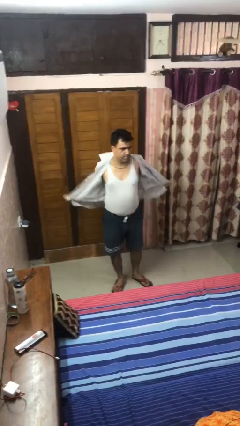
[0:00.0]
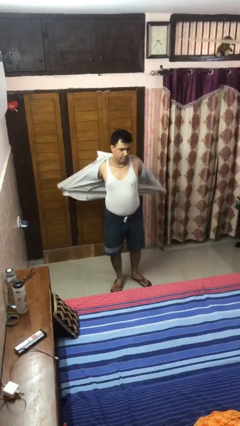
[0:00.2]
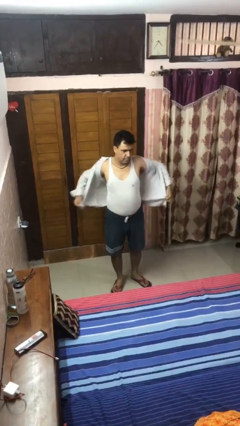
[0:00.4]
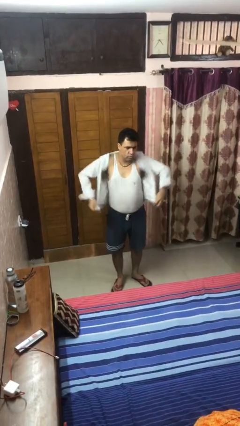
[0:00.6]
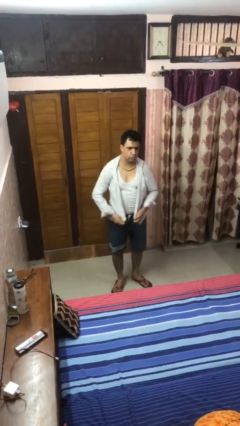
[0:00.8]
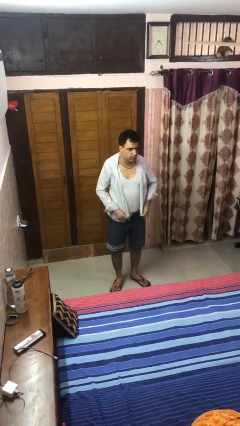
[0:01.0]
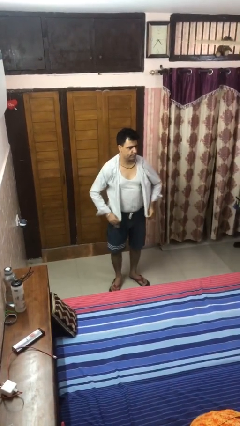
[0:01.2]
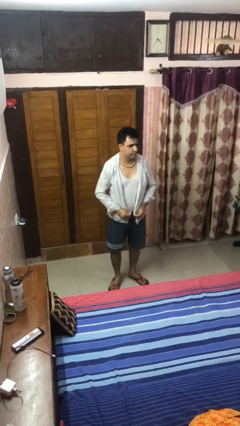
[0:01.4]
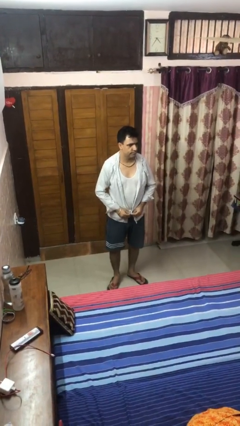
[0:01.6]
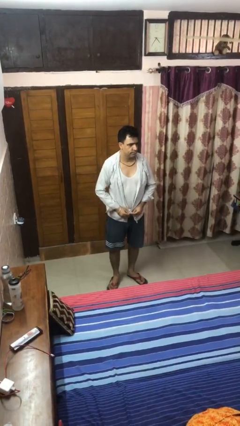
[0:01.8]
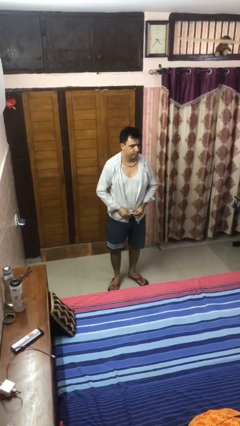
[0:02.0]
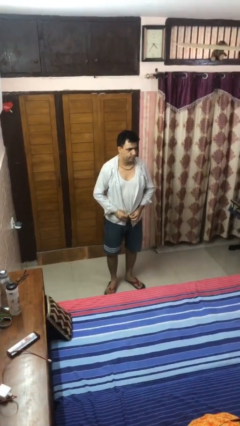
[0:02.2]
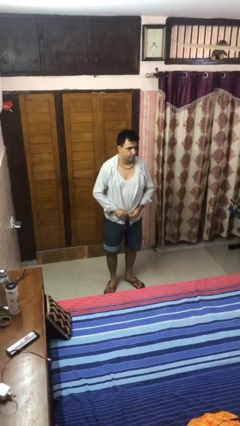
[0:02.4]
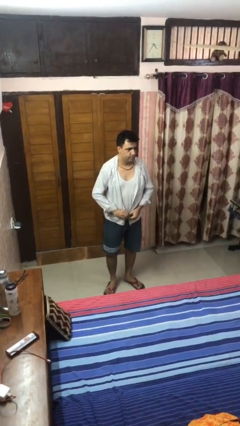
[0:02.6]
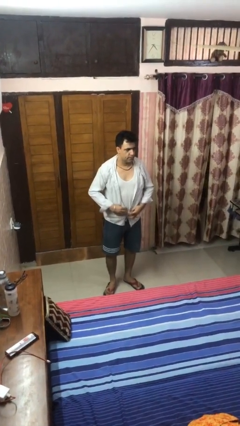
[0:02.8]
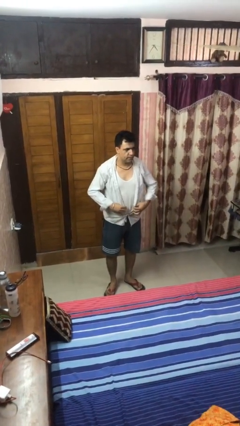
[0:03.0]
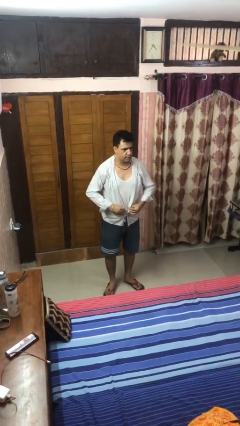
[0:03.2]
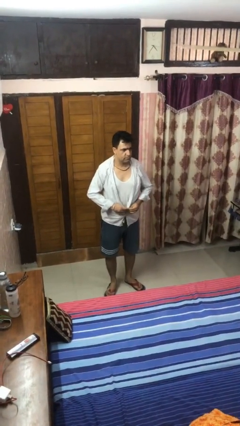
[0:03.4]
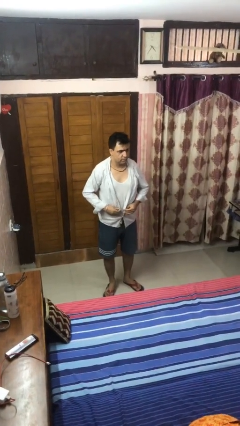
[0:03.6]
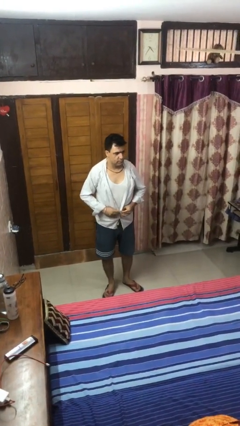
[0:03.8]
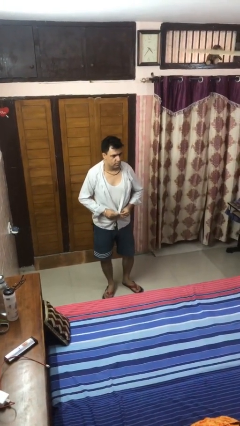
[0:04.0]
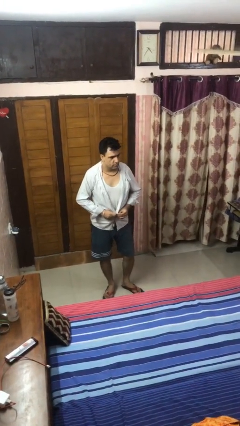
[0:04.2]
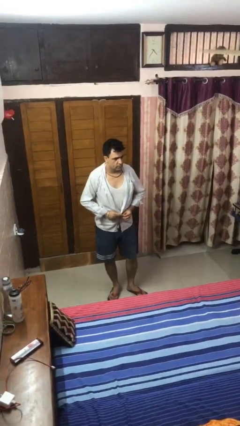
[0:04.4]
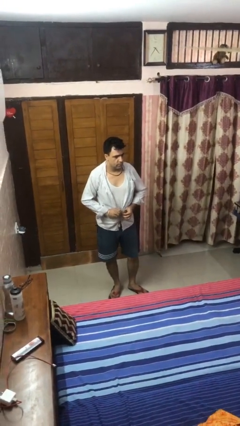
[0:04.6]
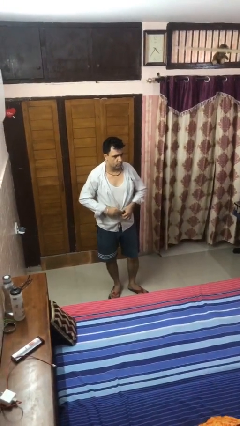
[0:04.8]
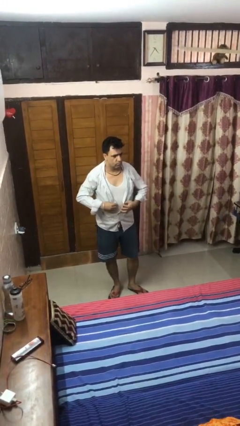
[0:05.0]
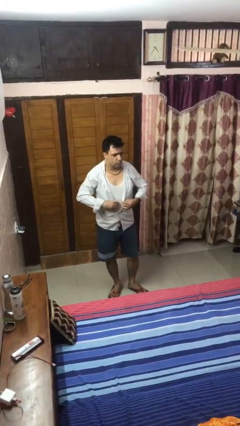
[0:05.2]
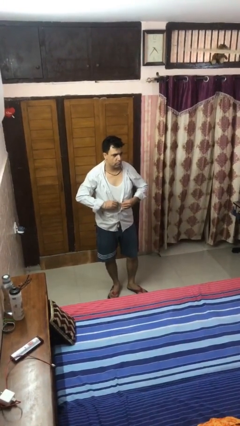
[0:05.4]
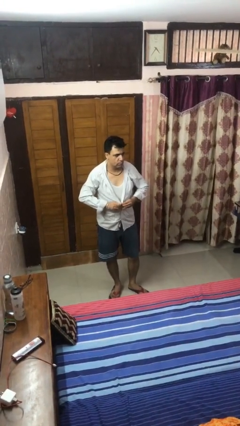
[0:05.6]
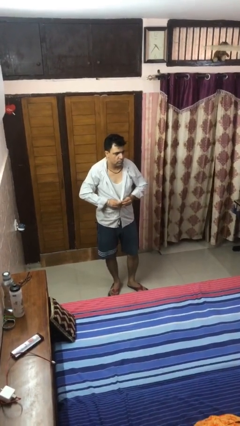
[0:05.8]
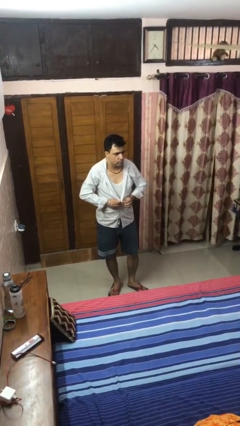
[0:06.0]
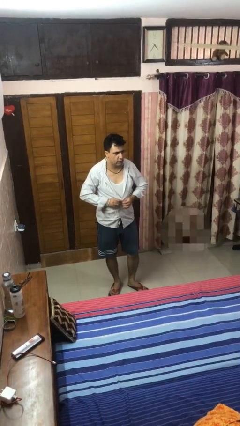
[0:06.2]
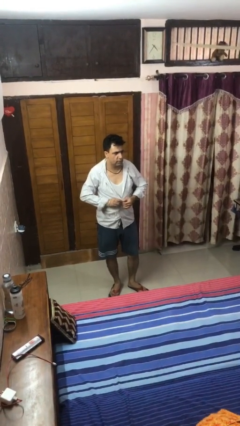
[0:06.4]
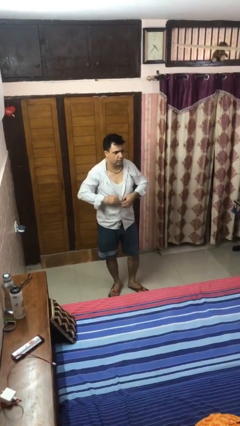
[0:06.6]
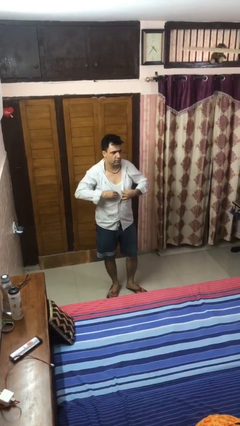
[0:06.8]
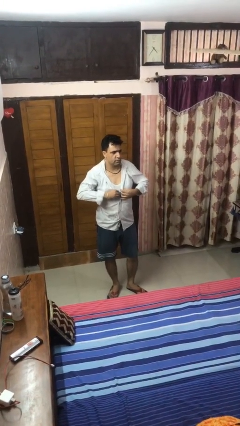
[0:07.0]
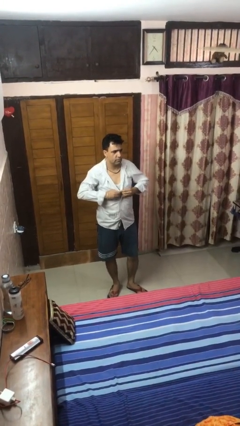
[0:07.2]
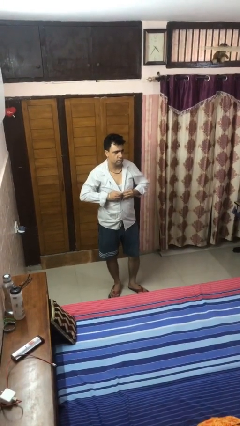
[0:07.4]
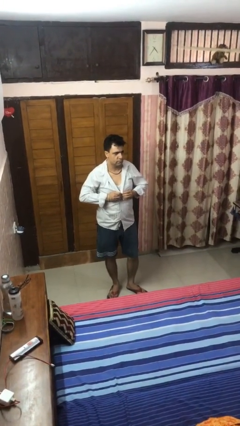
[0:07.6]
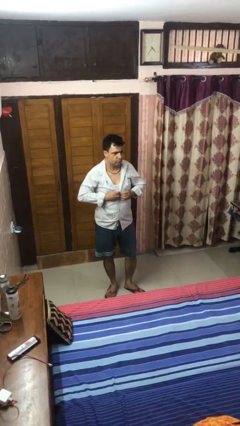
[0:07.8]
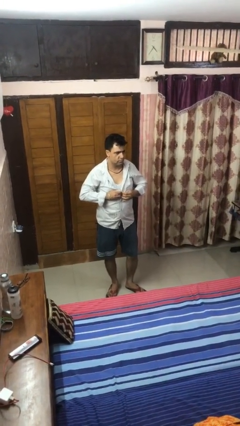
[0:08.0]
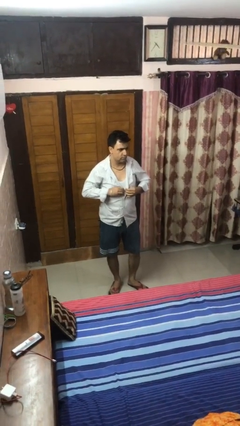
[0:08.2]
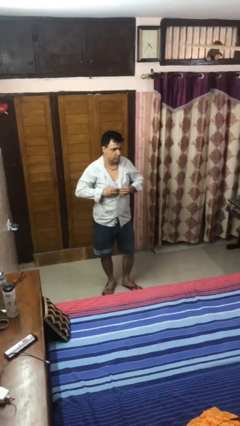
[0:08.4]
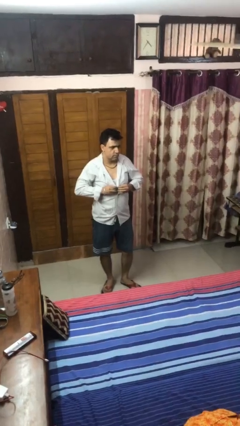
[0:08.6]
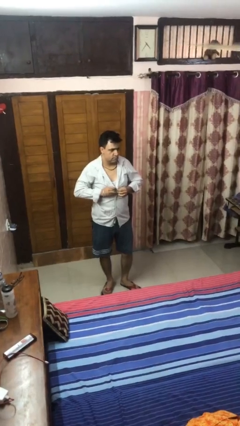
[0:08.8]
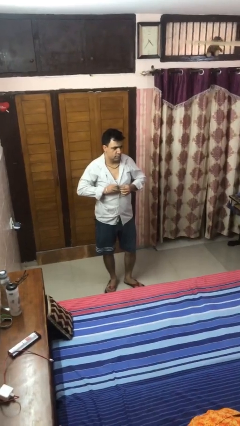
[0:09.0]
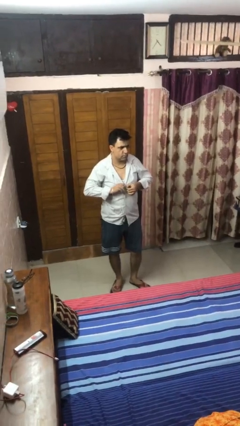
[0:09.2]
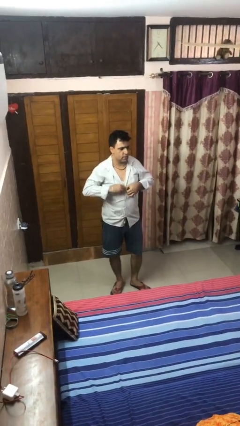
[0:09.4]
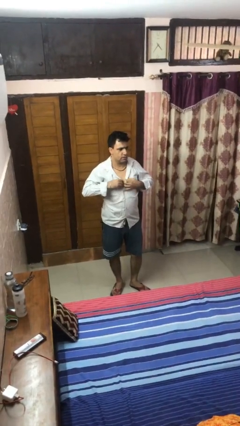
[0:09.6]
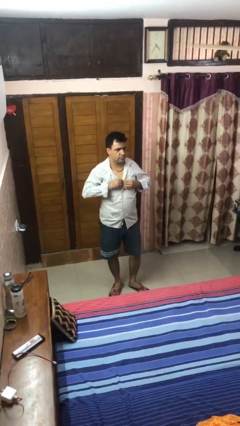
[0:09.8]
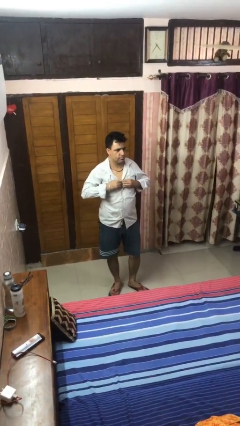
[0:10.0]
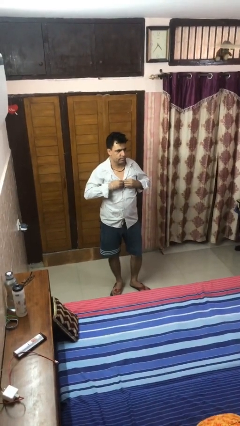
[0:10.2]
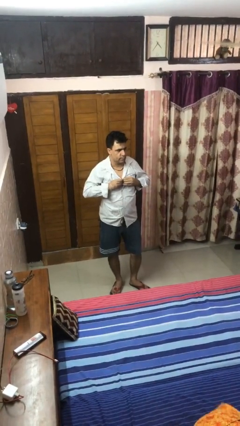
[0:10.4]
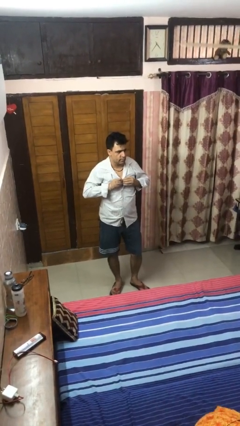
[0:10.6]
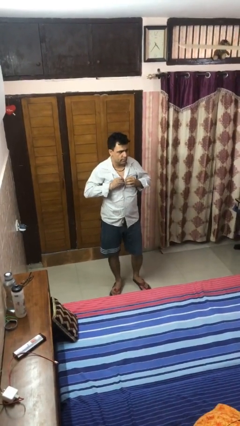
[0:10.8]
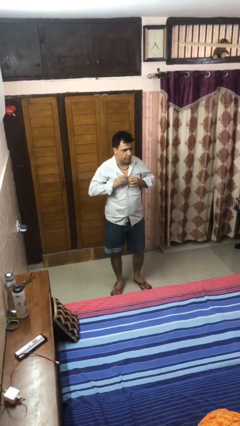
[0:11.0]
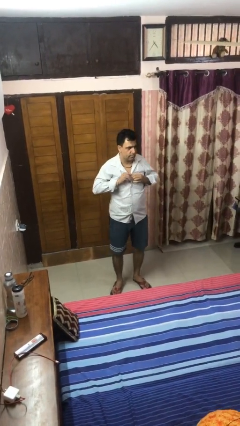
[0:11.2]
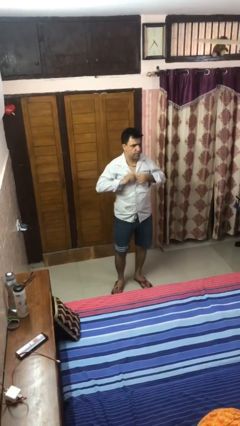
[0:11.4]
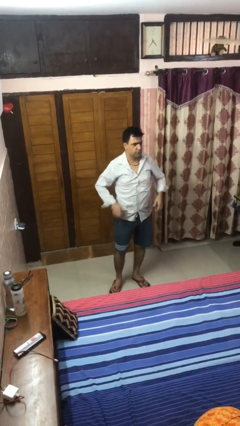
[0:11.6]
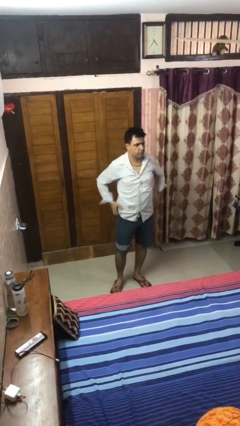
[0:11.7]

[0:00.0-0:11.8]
person buttons shirt

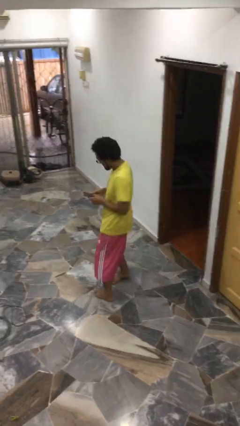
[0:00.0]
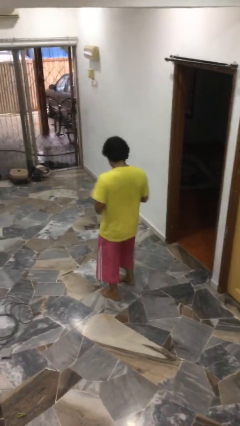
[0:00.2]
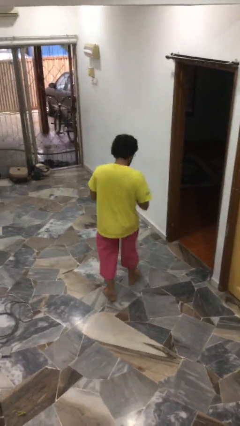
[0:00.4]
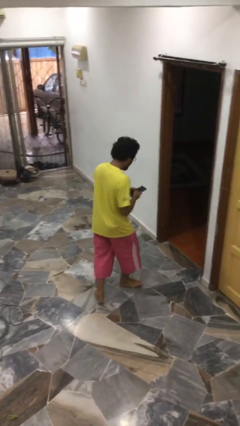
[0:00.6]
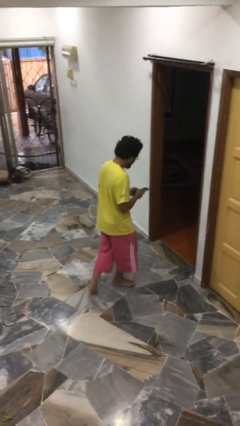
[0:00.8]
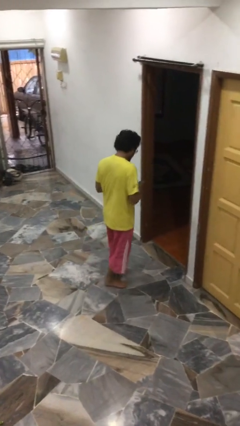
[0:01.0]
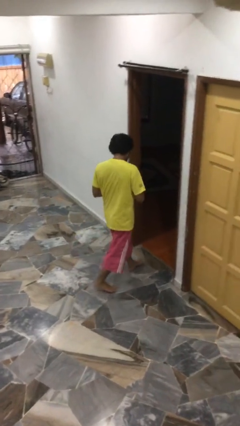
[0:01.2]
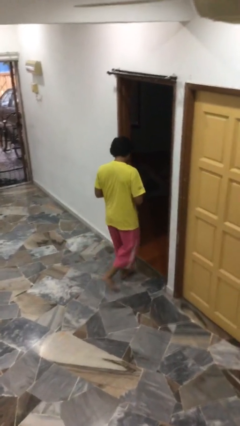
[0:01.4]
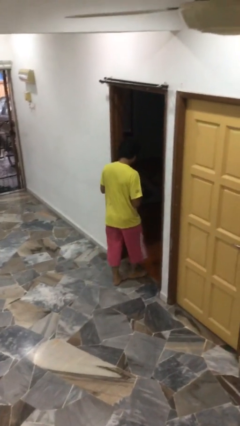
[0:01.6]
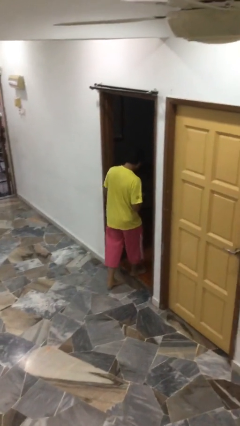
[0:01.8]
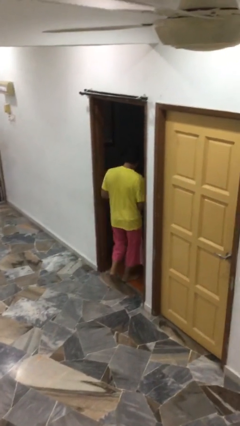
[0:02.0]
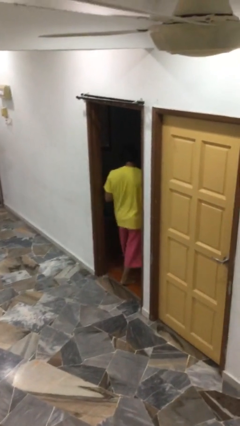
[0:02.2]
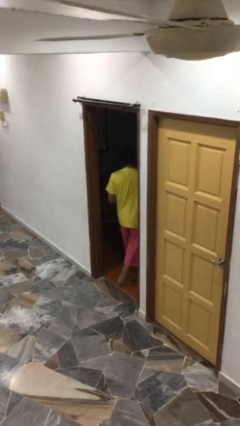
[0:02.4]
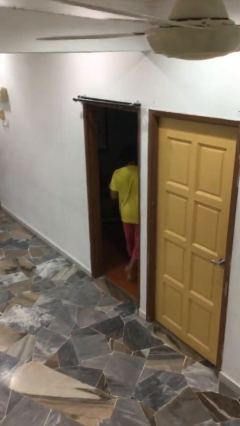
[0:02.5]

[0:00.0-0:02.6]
person exits scene through structure

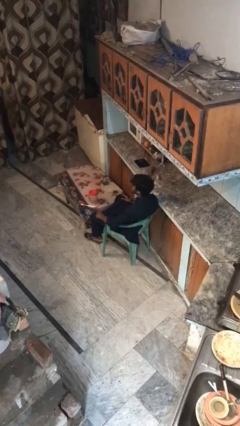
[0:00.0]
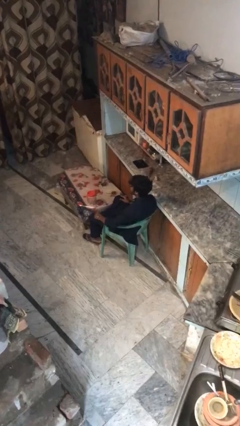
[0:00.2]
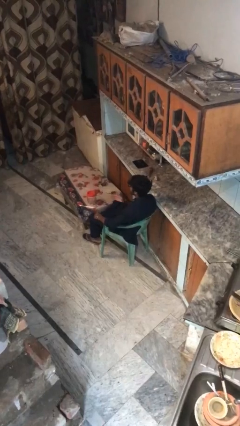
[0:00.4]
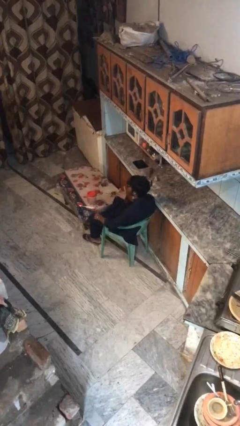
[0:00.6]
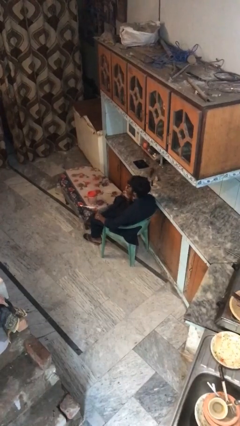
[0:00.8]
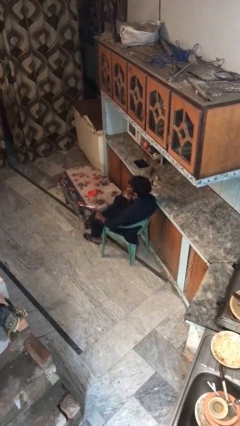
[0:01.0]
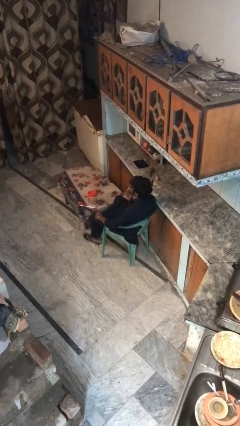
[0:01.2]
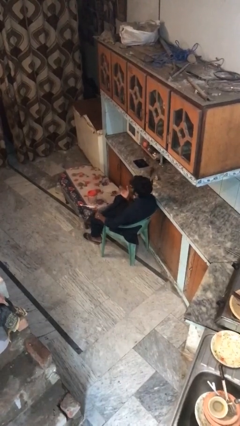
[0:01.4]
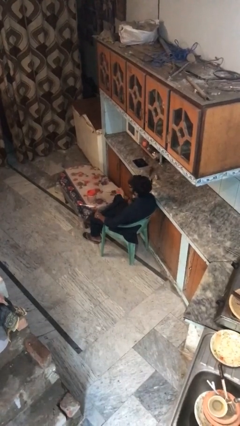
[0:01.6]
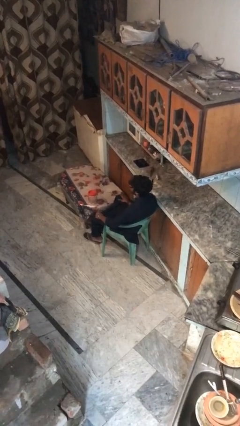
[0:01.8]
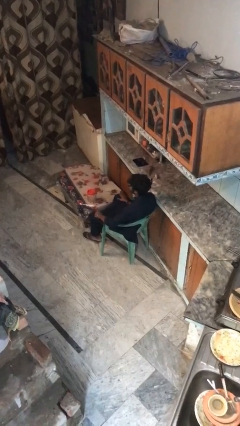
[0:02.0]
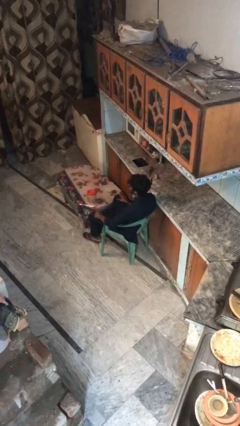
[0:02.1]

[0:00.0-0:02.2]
person licks fingers

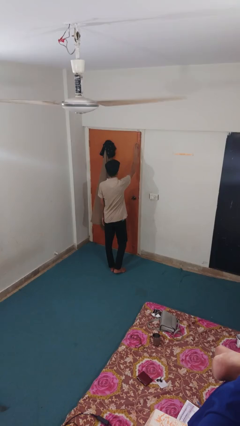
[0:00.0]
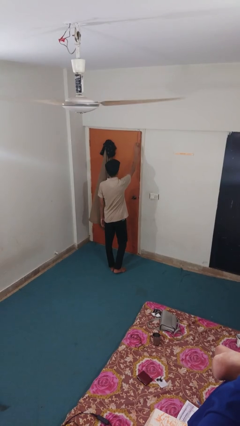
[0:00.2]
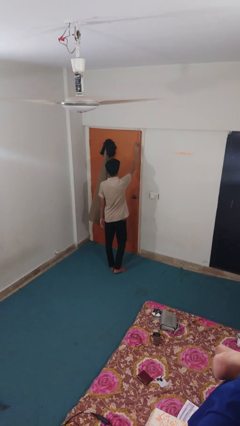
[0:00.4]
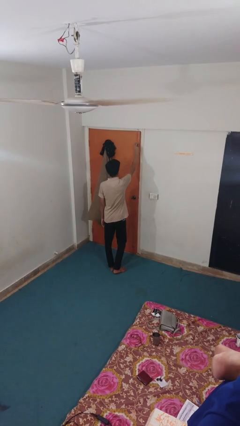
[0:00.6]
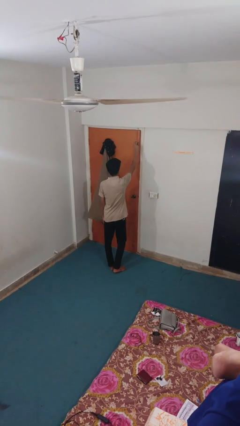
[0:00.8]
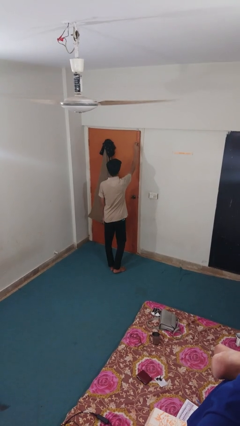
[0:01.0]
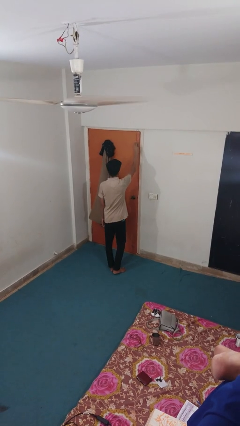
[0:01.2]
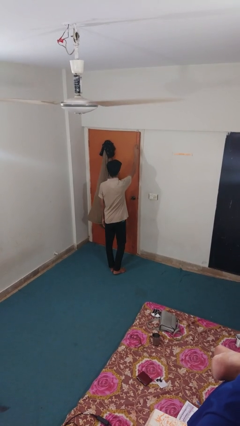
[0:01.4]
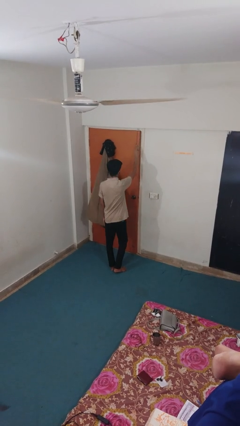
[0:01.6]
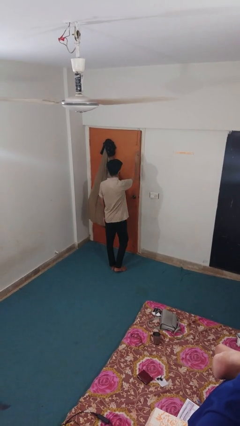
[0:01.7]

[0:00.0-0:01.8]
person locks door with keys
